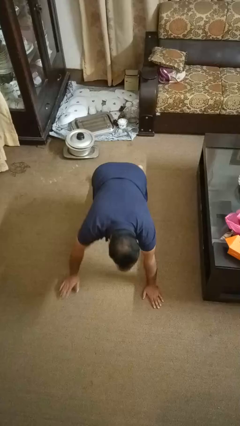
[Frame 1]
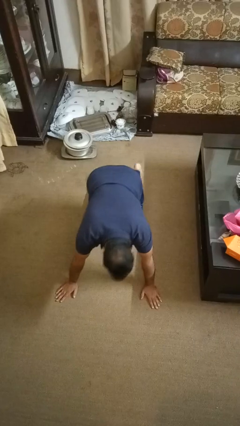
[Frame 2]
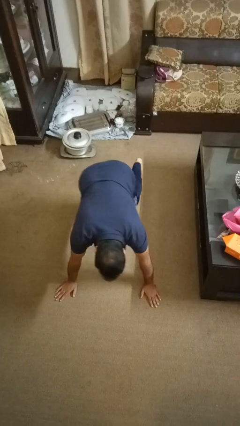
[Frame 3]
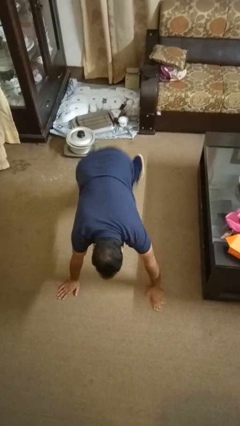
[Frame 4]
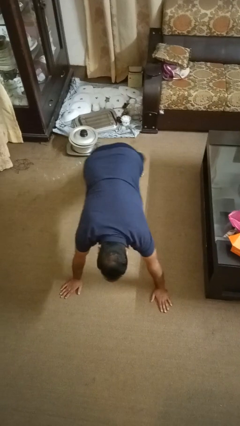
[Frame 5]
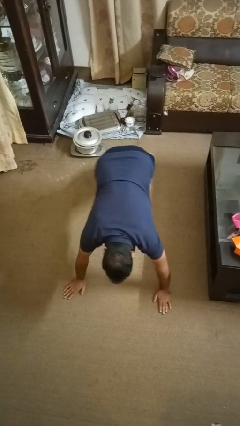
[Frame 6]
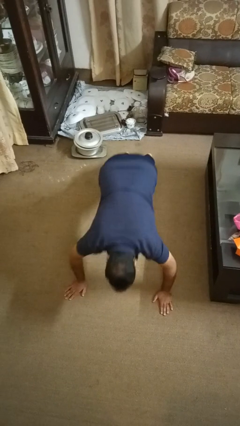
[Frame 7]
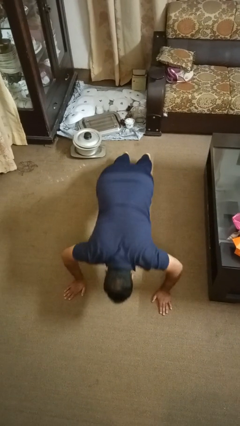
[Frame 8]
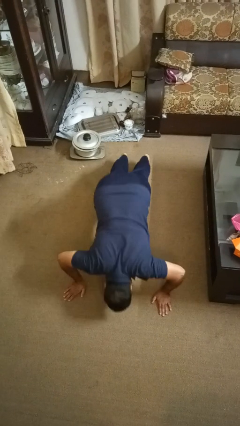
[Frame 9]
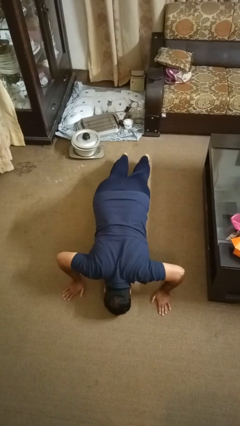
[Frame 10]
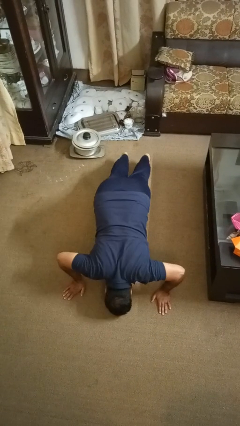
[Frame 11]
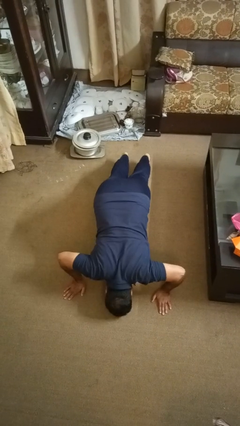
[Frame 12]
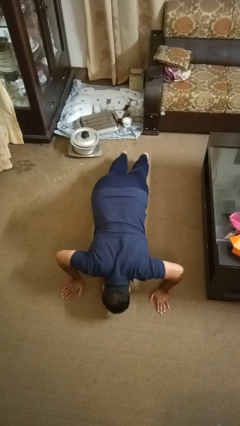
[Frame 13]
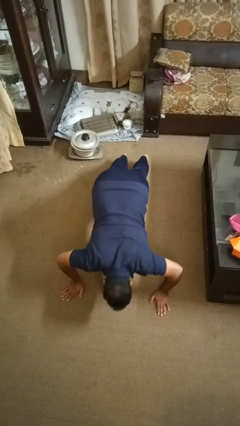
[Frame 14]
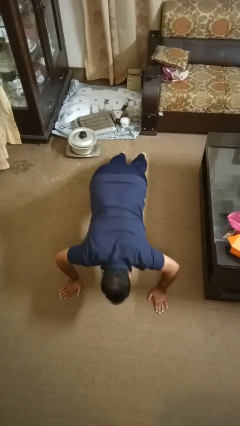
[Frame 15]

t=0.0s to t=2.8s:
person exercises with pushup

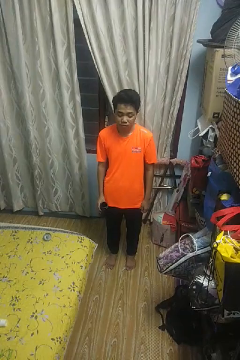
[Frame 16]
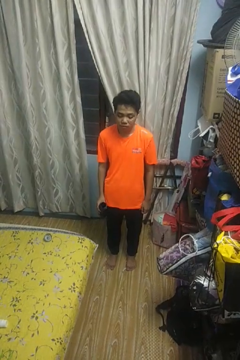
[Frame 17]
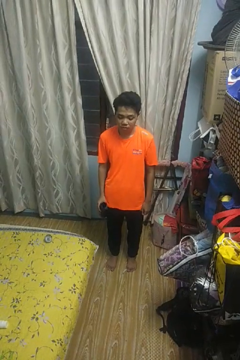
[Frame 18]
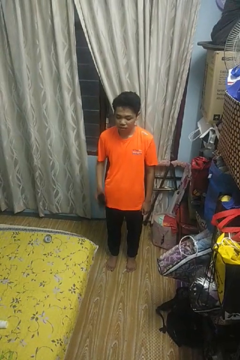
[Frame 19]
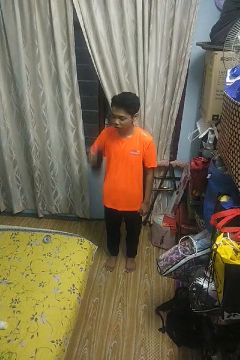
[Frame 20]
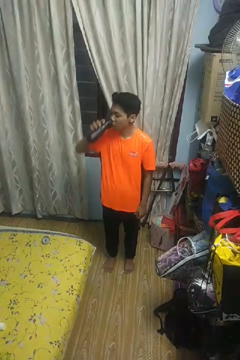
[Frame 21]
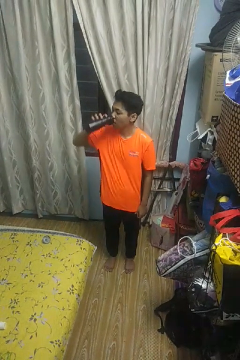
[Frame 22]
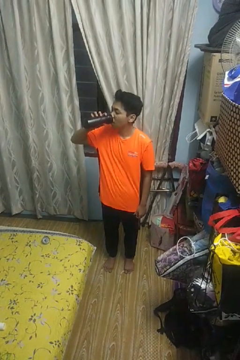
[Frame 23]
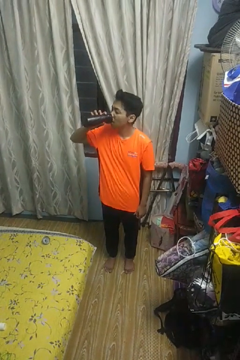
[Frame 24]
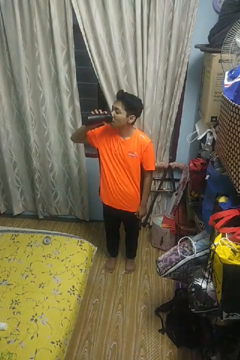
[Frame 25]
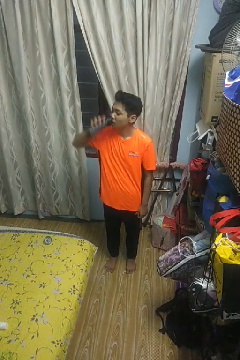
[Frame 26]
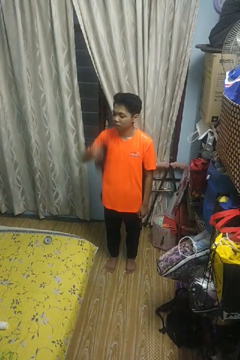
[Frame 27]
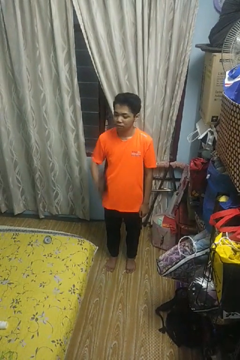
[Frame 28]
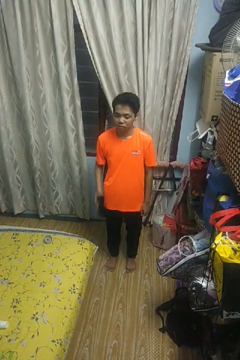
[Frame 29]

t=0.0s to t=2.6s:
person drinks from bottle

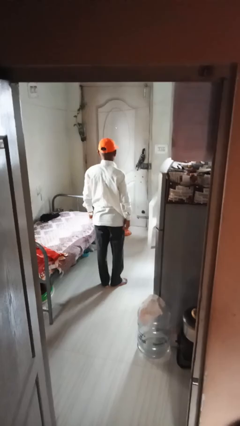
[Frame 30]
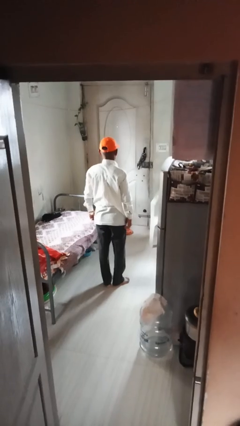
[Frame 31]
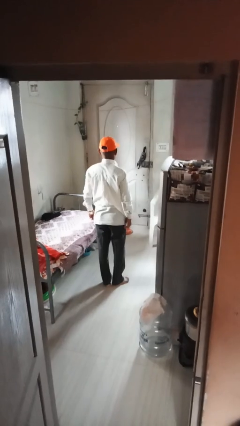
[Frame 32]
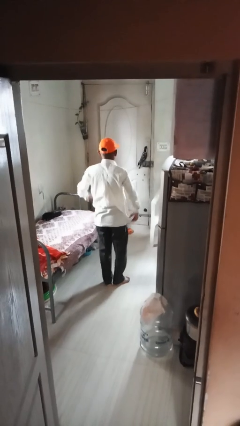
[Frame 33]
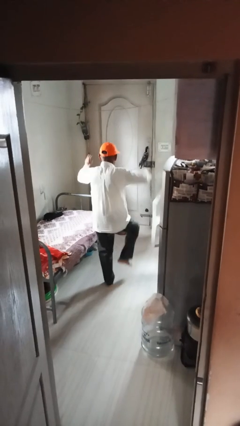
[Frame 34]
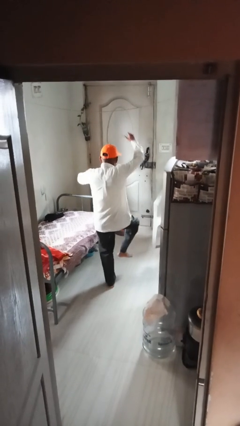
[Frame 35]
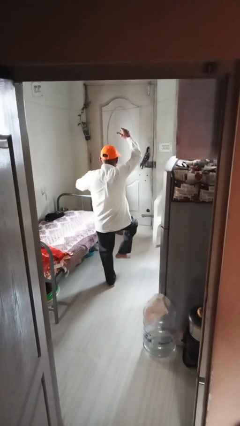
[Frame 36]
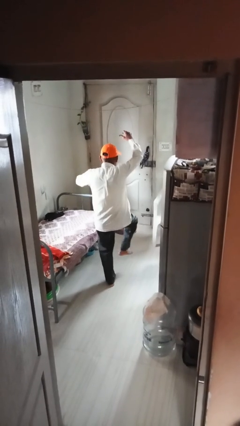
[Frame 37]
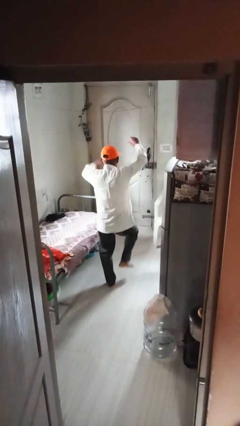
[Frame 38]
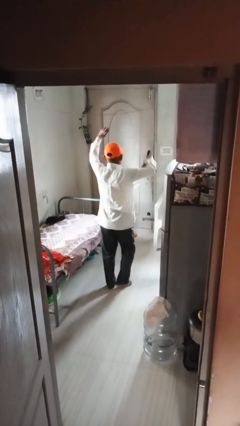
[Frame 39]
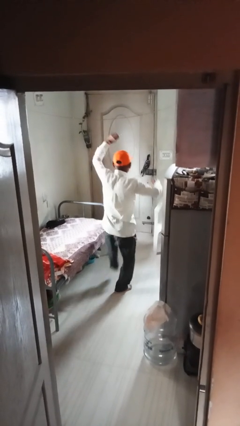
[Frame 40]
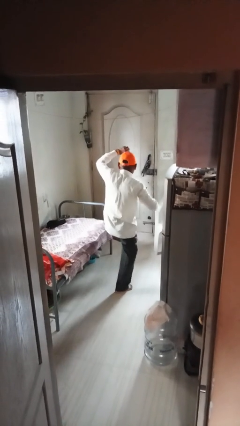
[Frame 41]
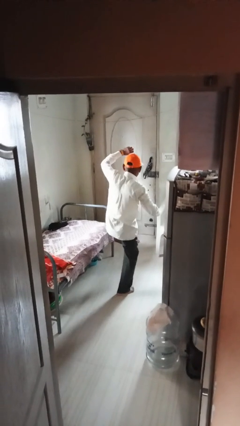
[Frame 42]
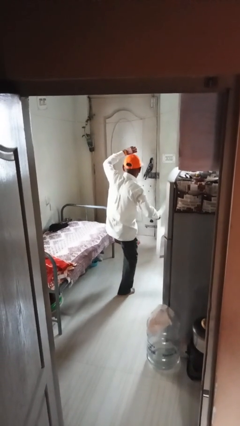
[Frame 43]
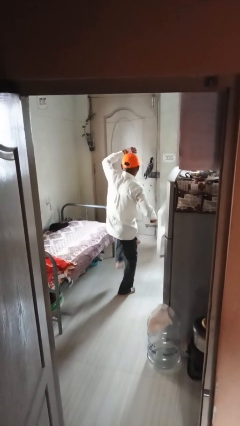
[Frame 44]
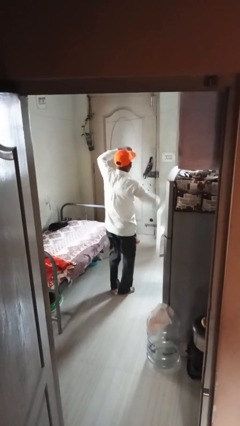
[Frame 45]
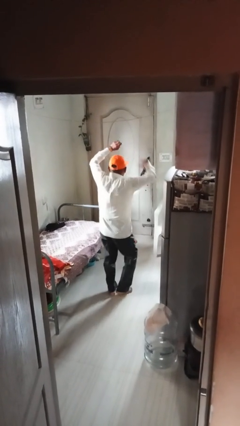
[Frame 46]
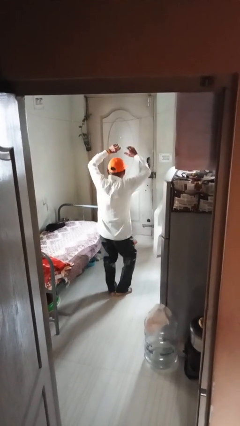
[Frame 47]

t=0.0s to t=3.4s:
person dances in place

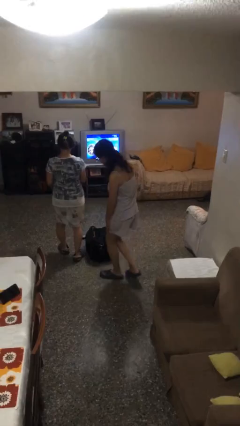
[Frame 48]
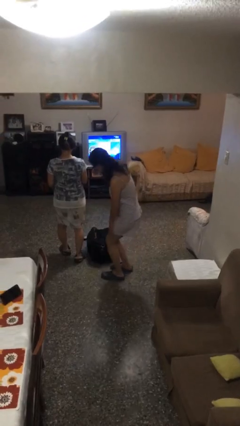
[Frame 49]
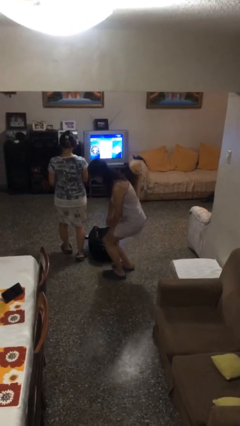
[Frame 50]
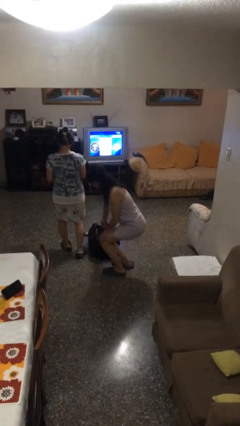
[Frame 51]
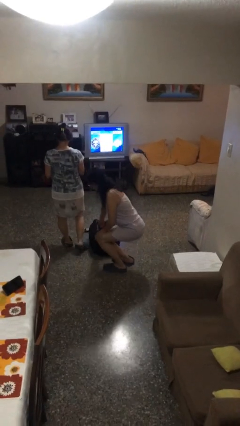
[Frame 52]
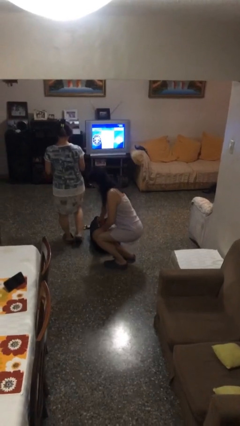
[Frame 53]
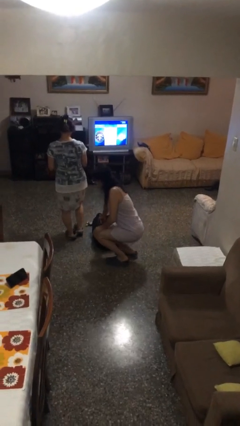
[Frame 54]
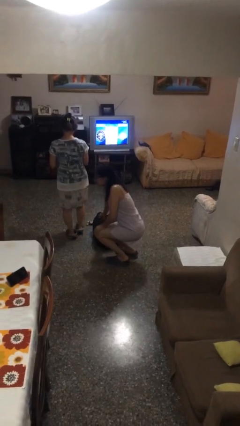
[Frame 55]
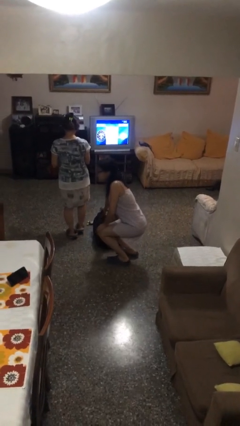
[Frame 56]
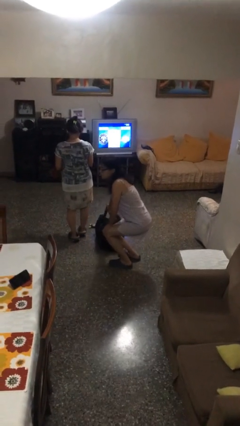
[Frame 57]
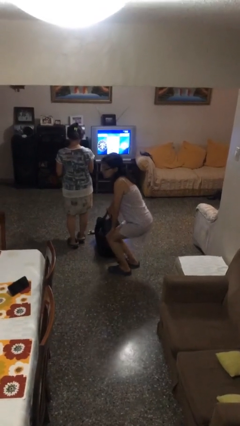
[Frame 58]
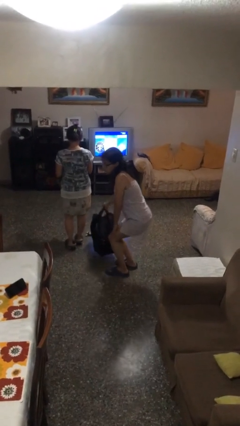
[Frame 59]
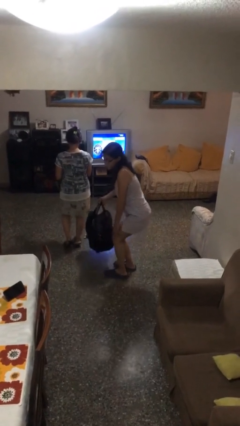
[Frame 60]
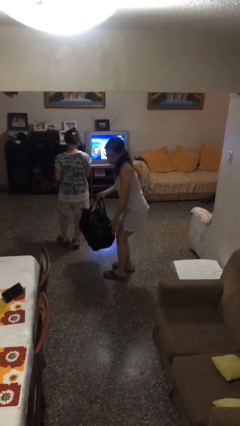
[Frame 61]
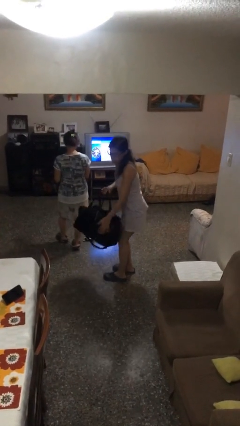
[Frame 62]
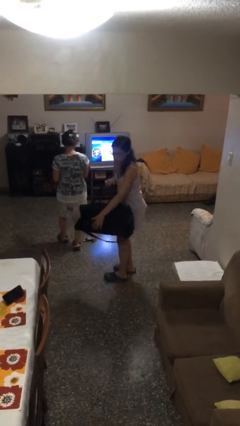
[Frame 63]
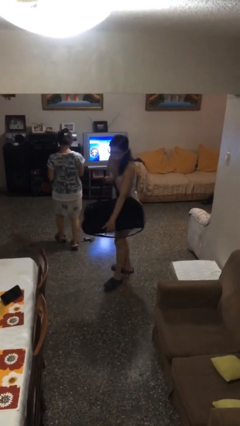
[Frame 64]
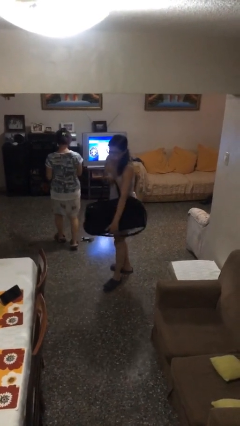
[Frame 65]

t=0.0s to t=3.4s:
person steals object from person

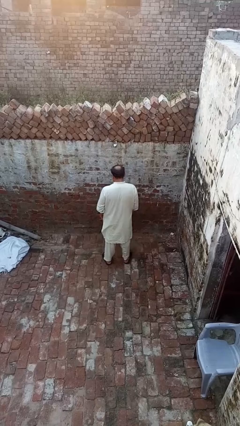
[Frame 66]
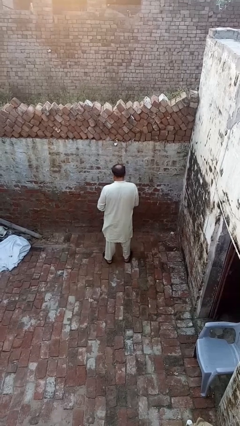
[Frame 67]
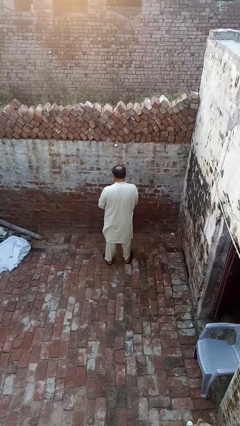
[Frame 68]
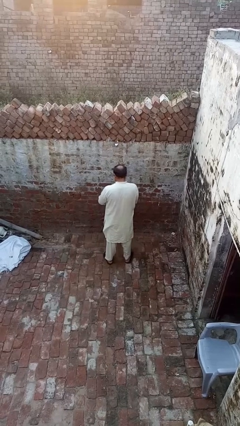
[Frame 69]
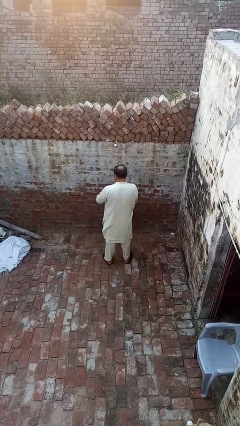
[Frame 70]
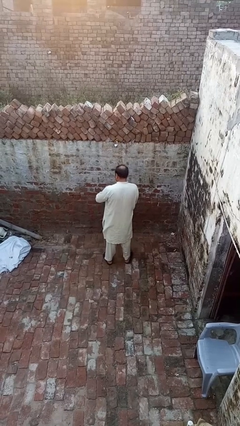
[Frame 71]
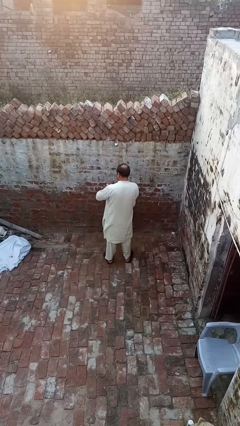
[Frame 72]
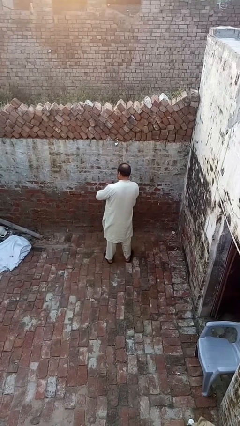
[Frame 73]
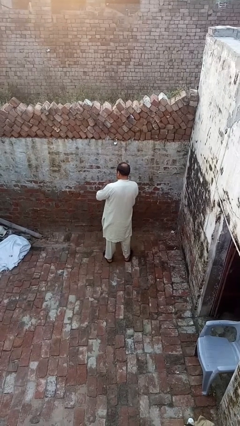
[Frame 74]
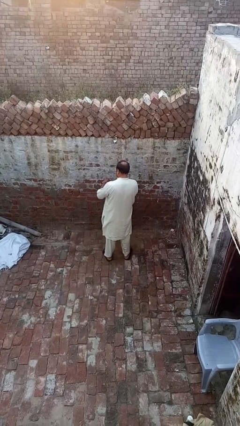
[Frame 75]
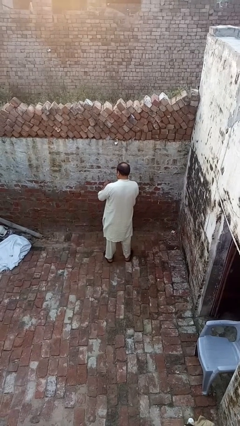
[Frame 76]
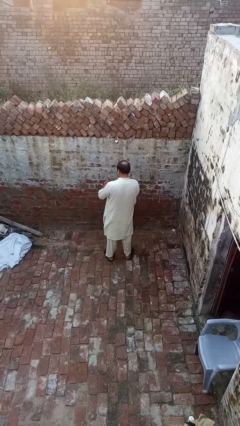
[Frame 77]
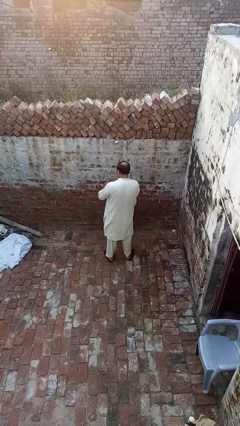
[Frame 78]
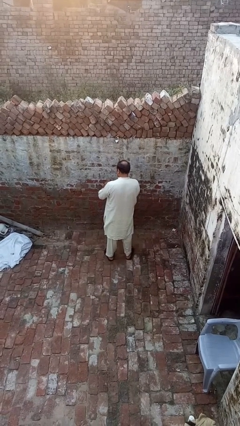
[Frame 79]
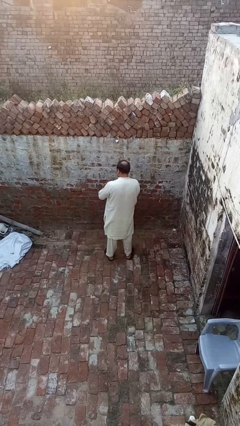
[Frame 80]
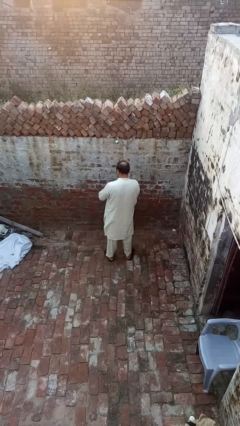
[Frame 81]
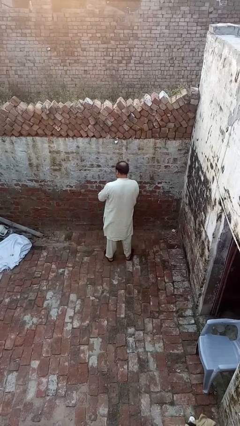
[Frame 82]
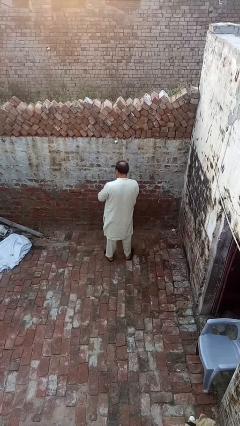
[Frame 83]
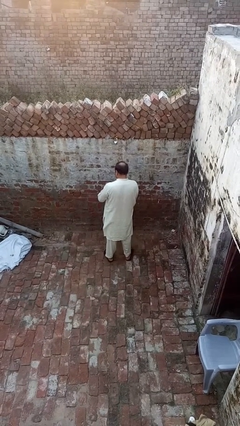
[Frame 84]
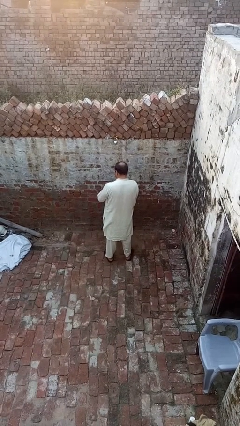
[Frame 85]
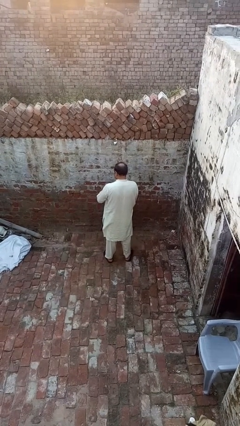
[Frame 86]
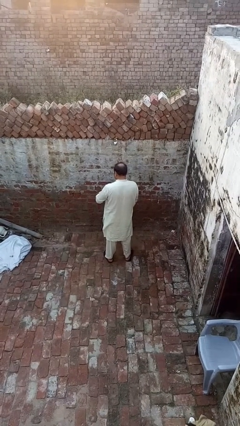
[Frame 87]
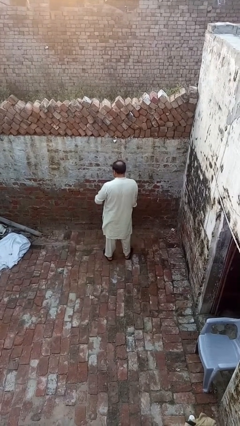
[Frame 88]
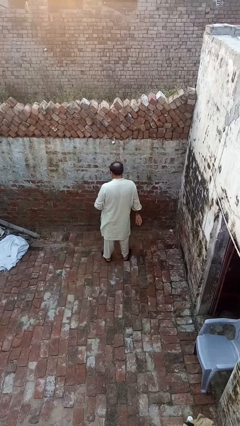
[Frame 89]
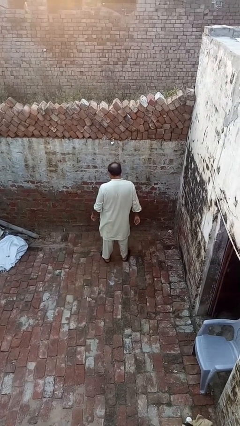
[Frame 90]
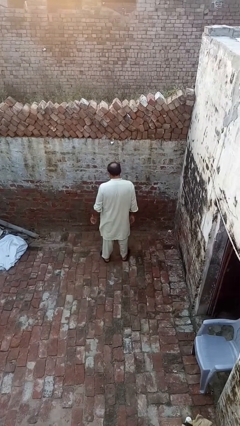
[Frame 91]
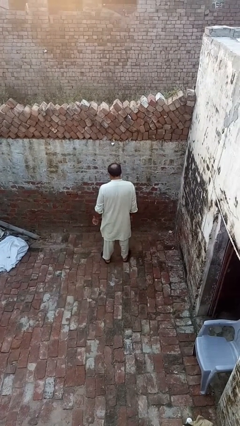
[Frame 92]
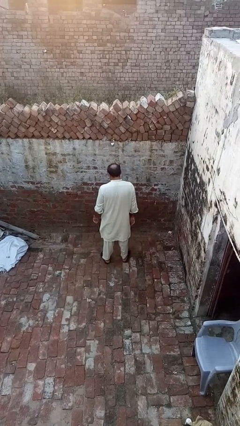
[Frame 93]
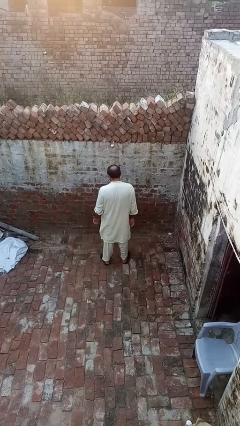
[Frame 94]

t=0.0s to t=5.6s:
person puts on wristwatch

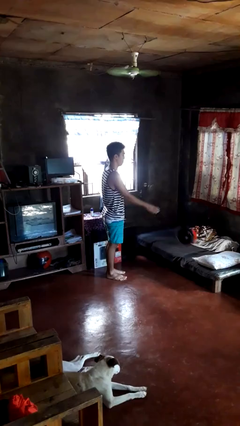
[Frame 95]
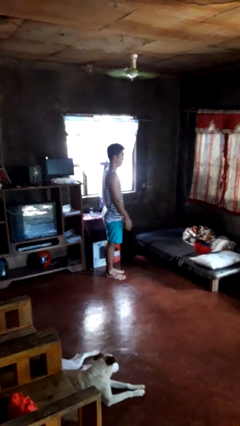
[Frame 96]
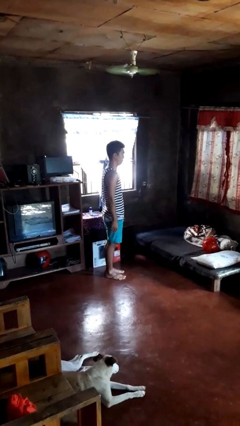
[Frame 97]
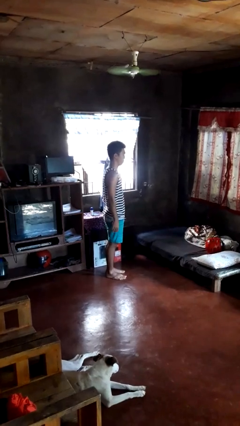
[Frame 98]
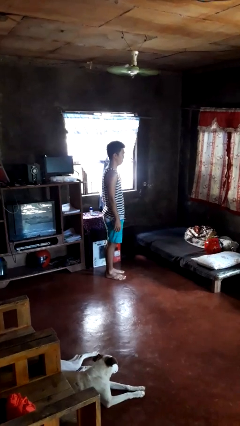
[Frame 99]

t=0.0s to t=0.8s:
person throws object on bed
